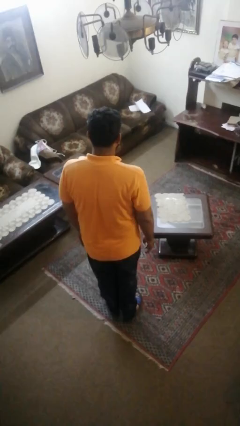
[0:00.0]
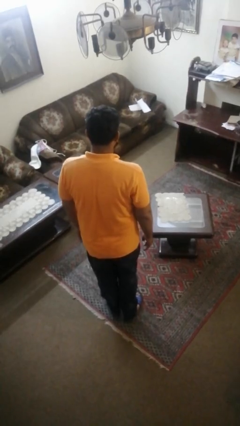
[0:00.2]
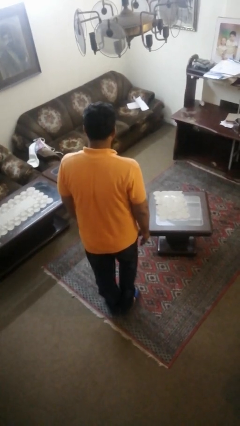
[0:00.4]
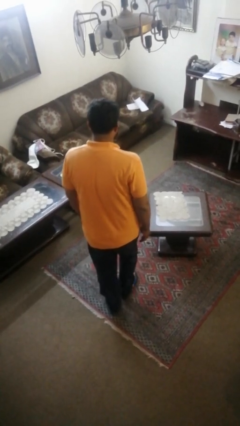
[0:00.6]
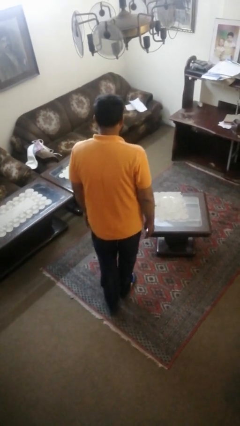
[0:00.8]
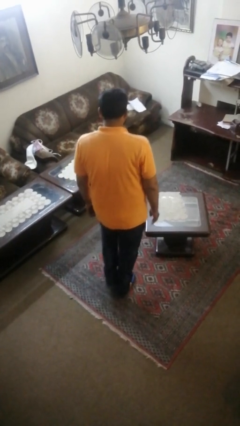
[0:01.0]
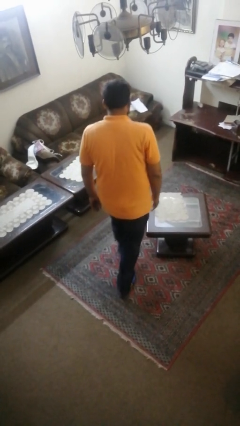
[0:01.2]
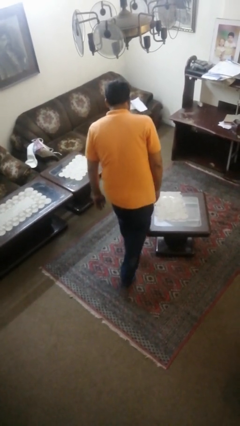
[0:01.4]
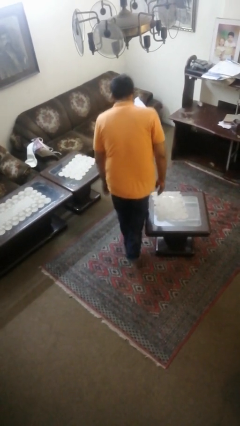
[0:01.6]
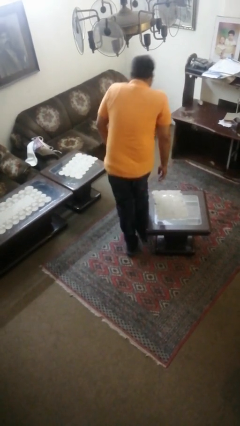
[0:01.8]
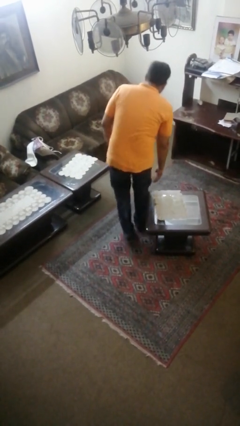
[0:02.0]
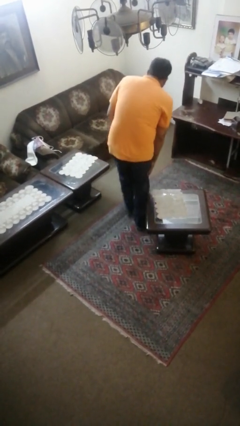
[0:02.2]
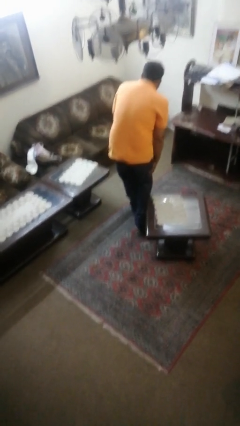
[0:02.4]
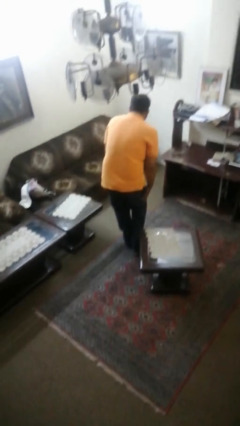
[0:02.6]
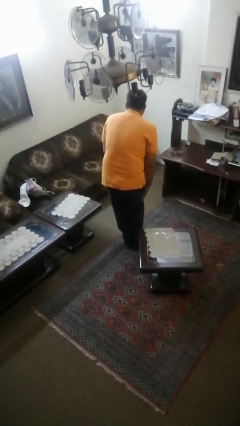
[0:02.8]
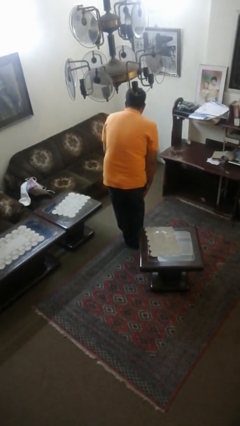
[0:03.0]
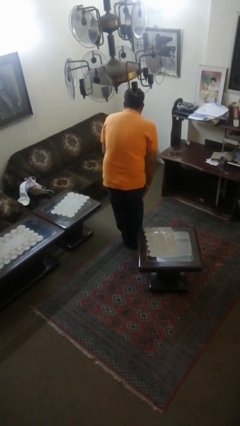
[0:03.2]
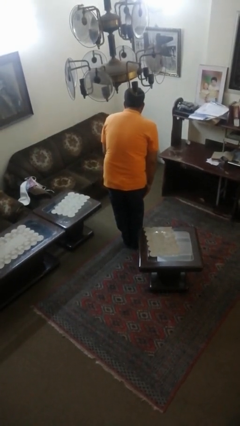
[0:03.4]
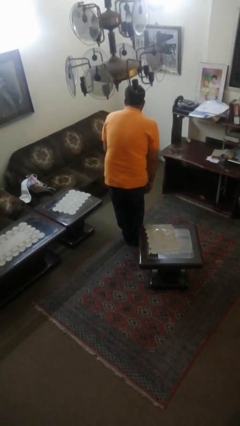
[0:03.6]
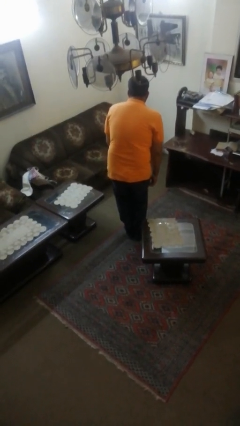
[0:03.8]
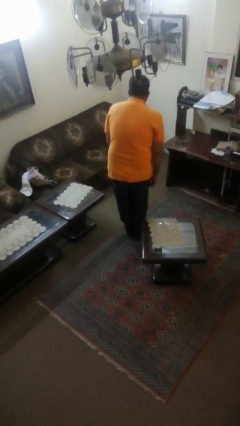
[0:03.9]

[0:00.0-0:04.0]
person bumps into table

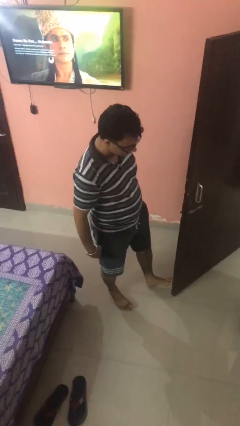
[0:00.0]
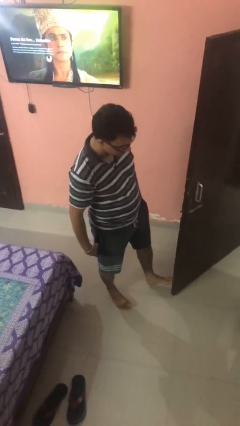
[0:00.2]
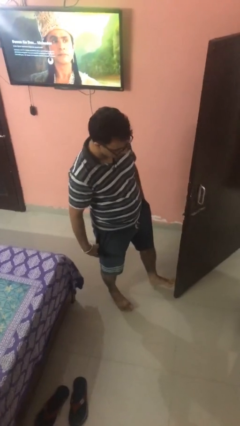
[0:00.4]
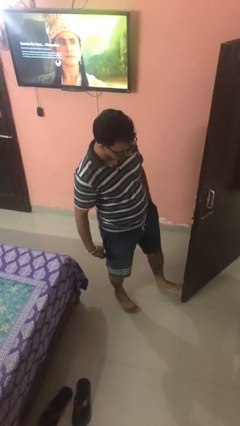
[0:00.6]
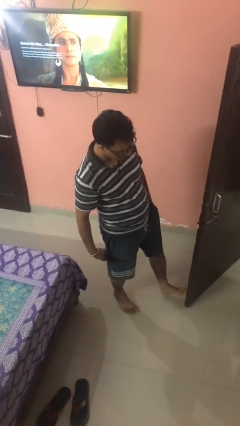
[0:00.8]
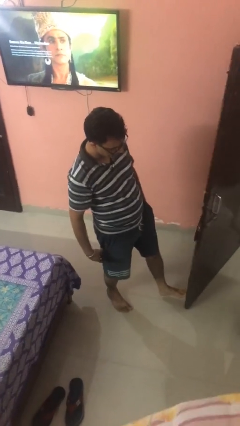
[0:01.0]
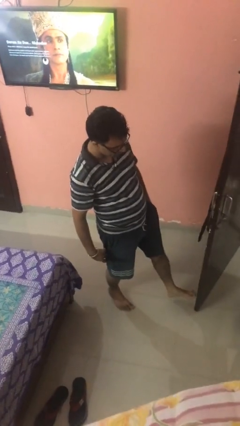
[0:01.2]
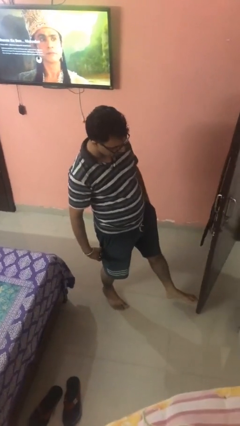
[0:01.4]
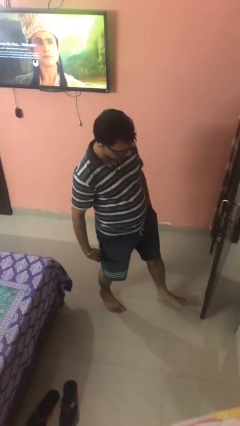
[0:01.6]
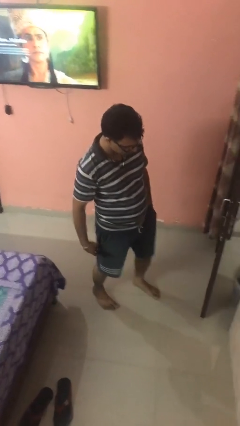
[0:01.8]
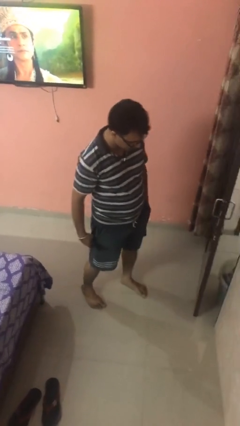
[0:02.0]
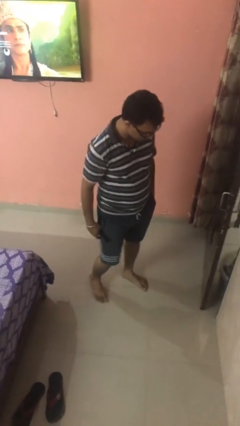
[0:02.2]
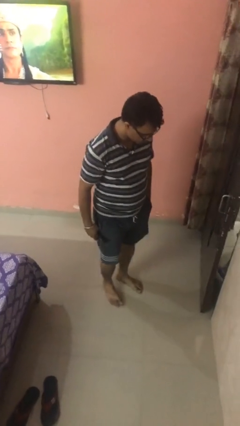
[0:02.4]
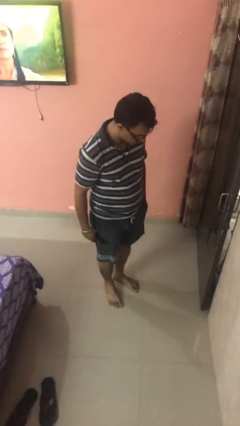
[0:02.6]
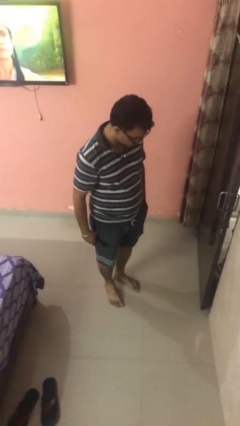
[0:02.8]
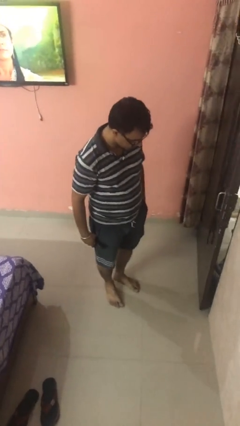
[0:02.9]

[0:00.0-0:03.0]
person closes door with foot

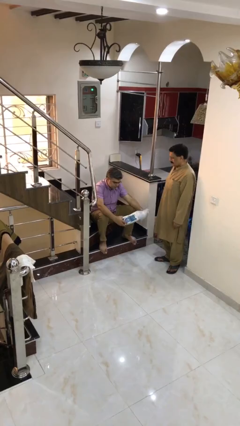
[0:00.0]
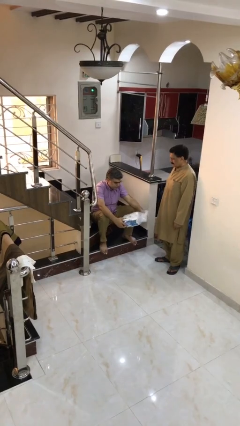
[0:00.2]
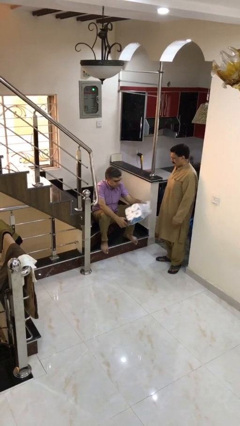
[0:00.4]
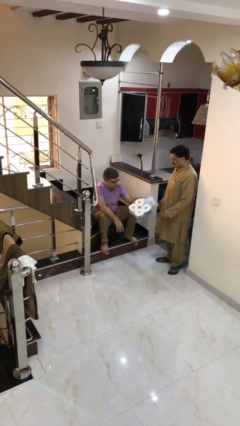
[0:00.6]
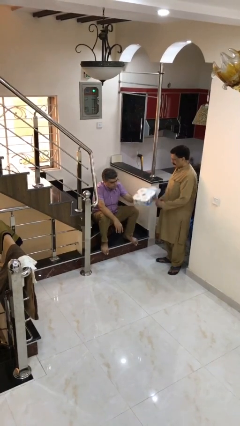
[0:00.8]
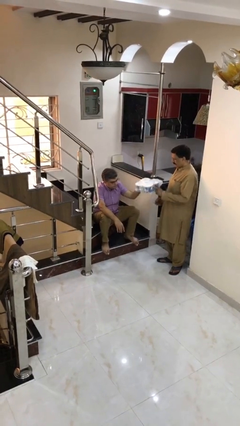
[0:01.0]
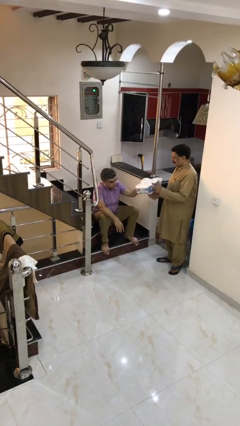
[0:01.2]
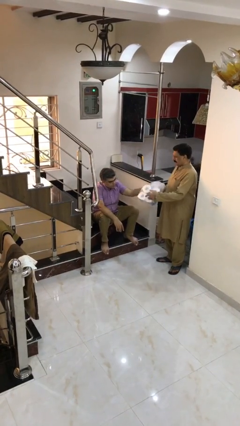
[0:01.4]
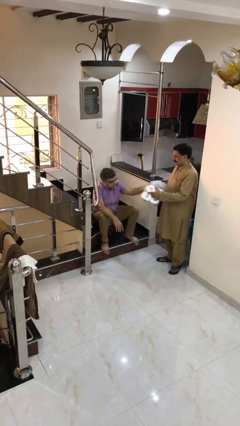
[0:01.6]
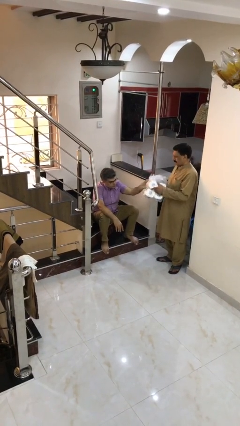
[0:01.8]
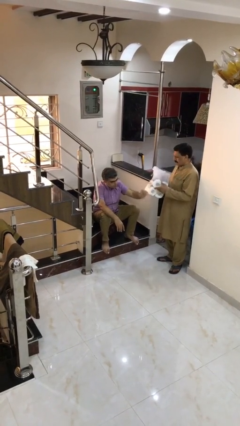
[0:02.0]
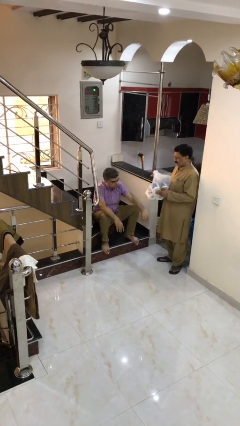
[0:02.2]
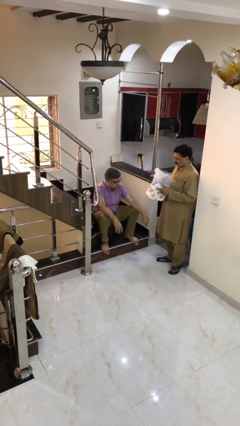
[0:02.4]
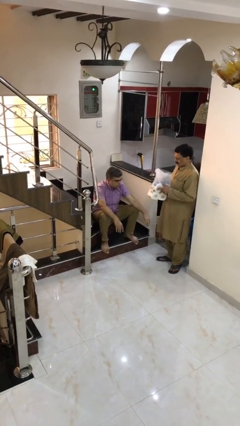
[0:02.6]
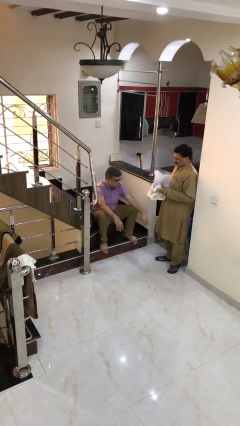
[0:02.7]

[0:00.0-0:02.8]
person transfers object to person

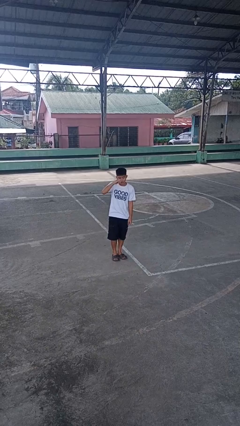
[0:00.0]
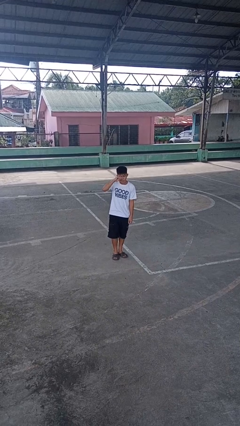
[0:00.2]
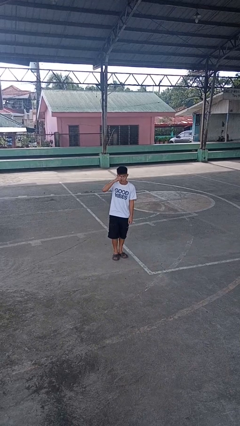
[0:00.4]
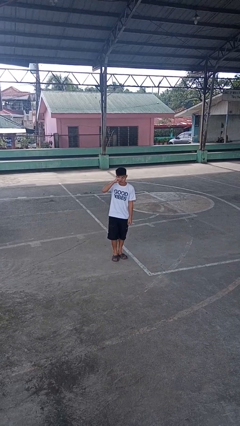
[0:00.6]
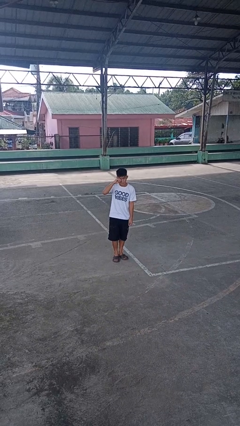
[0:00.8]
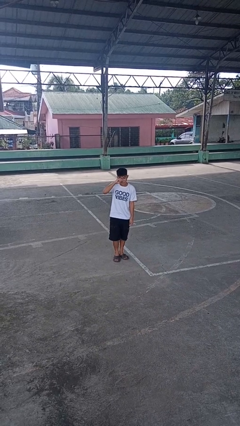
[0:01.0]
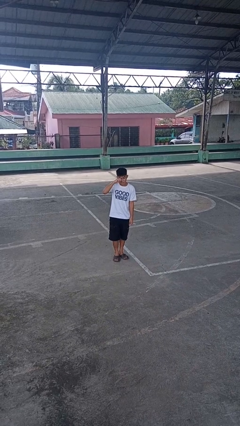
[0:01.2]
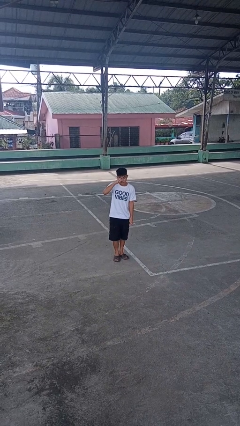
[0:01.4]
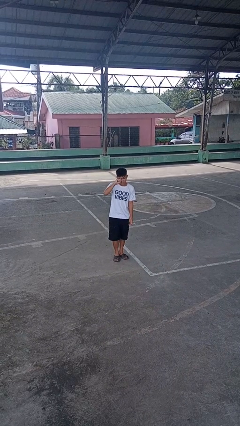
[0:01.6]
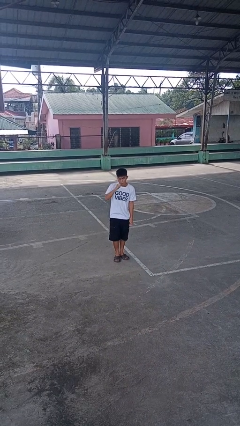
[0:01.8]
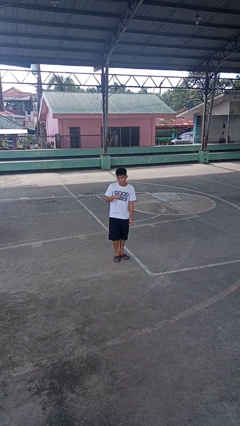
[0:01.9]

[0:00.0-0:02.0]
person rubs eyes

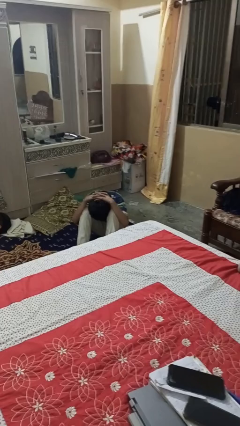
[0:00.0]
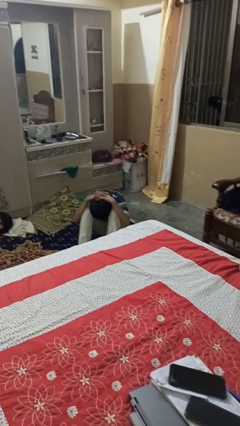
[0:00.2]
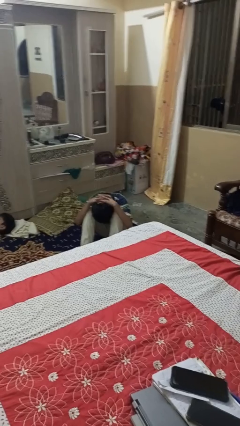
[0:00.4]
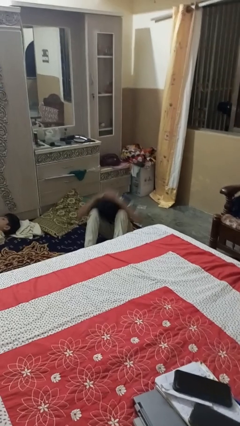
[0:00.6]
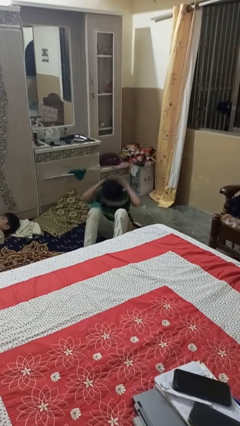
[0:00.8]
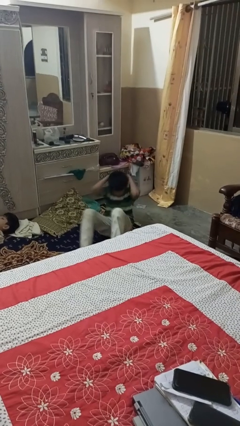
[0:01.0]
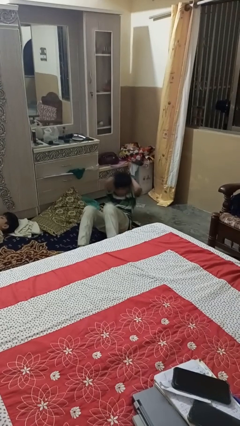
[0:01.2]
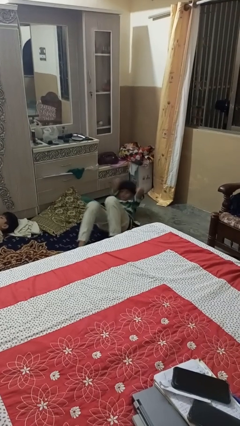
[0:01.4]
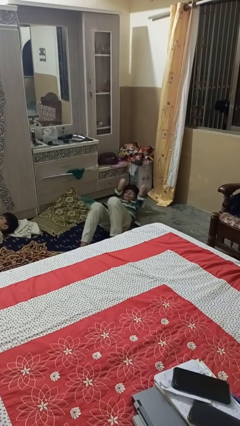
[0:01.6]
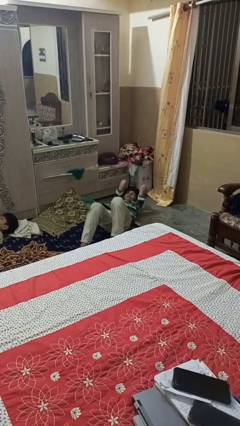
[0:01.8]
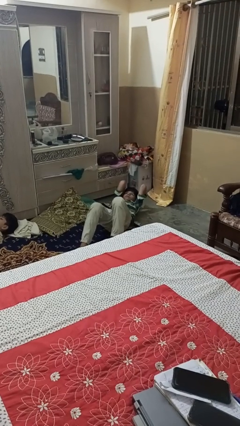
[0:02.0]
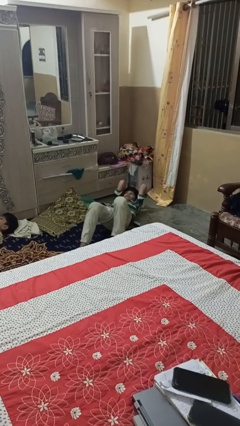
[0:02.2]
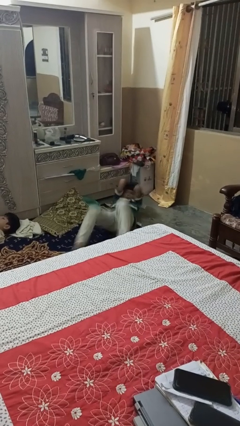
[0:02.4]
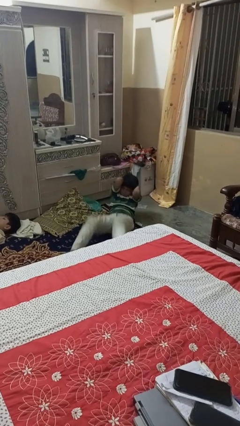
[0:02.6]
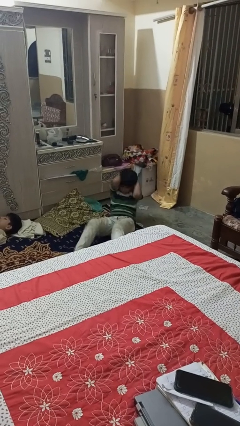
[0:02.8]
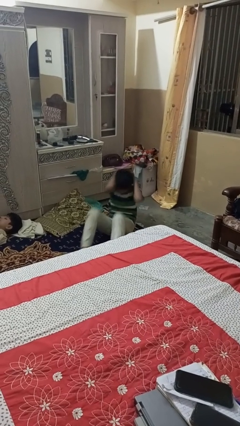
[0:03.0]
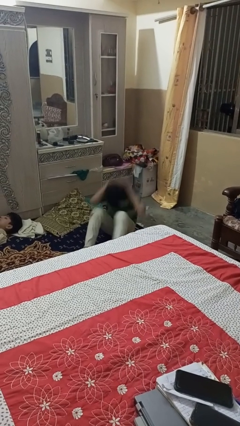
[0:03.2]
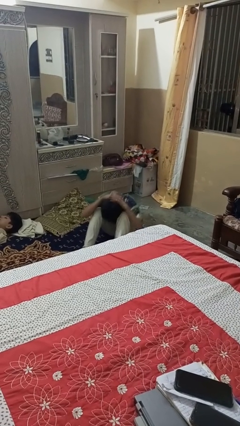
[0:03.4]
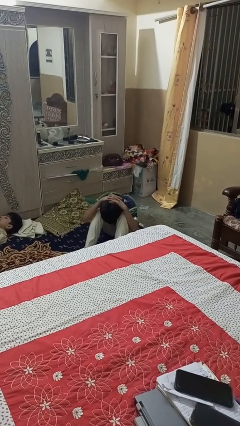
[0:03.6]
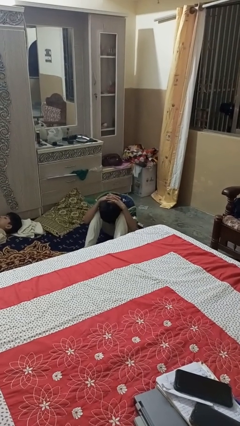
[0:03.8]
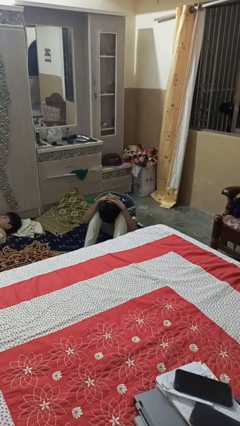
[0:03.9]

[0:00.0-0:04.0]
person exercises with situp

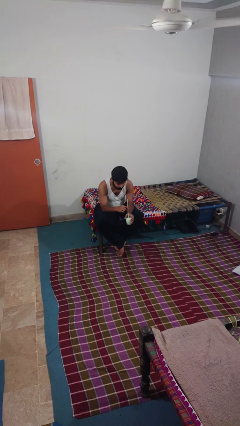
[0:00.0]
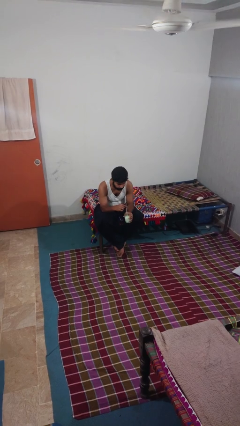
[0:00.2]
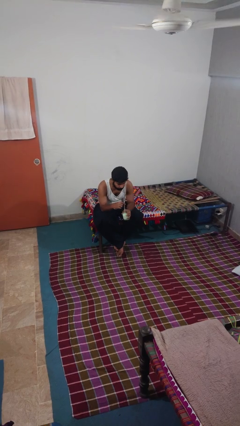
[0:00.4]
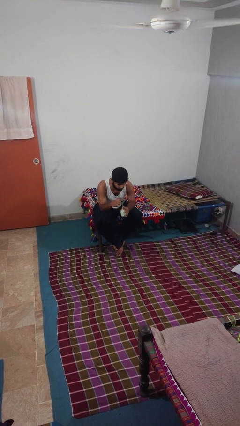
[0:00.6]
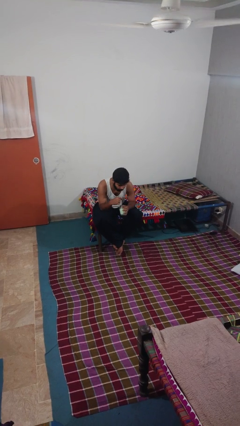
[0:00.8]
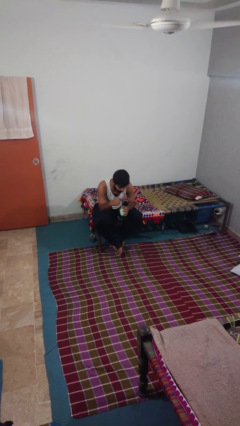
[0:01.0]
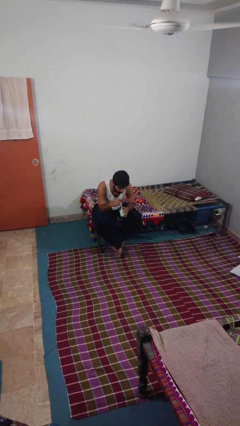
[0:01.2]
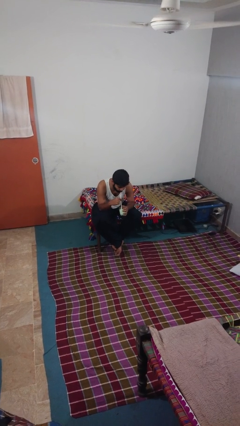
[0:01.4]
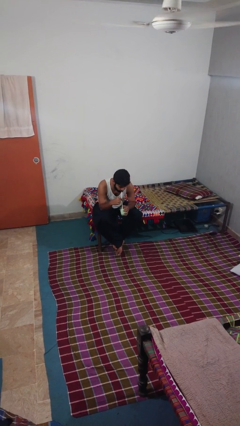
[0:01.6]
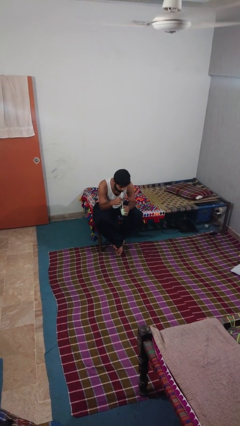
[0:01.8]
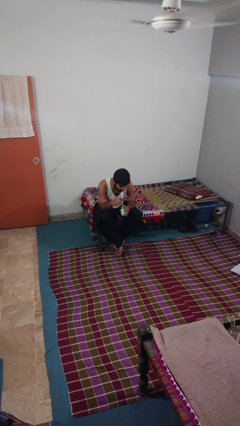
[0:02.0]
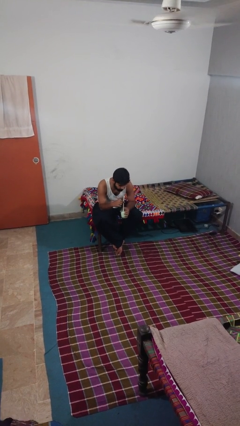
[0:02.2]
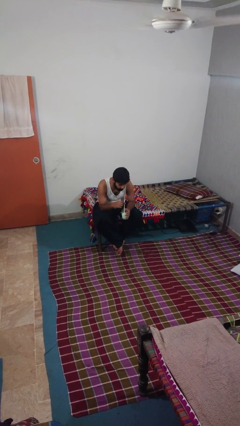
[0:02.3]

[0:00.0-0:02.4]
person drinks from straw
